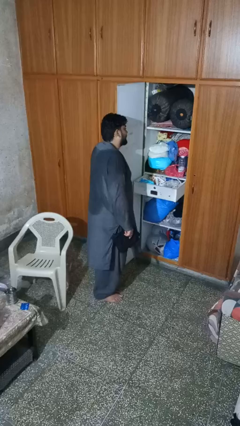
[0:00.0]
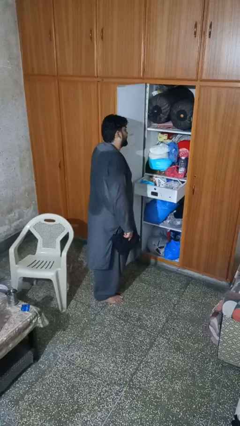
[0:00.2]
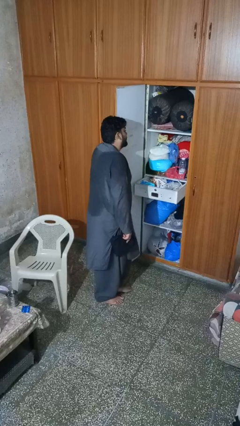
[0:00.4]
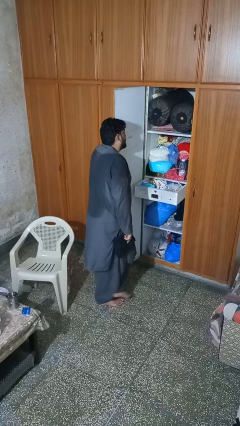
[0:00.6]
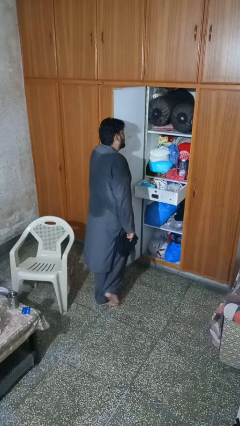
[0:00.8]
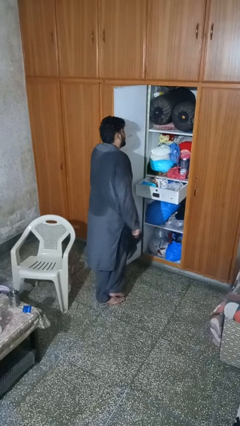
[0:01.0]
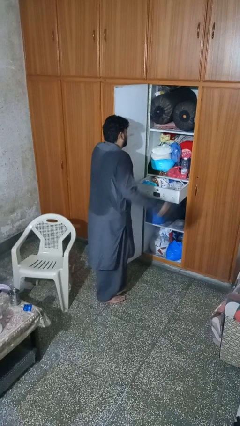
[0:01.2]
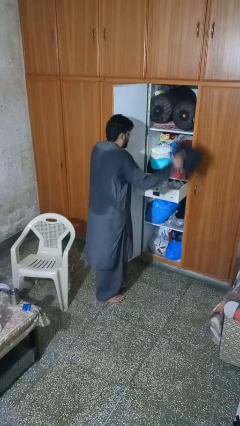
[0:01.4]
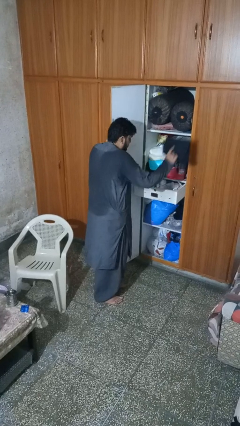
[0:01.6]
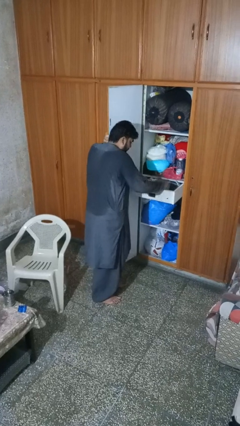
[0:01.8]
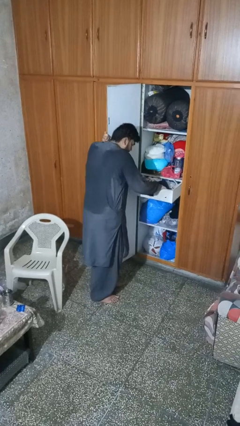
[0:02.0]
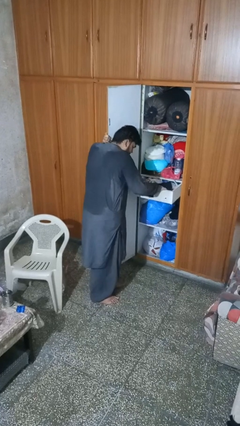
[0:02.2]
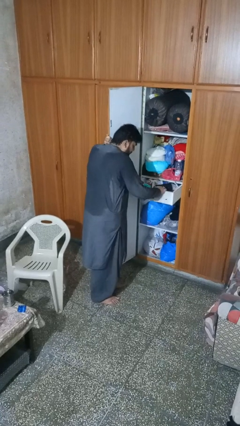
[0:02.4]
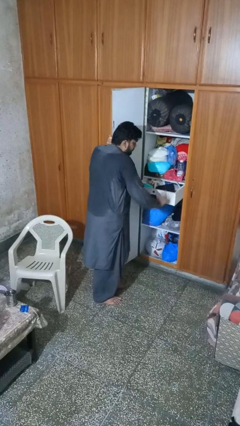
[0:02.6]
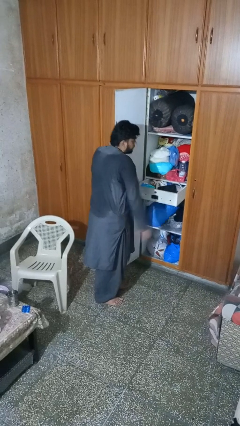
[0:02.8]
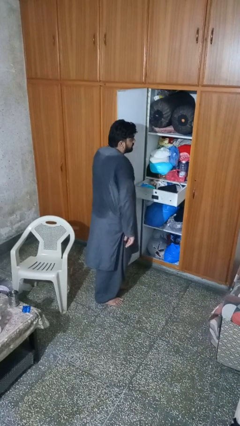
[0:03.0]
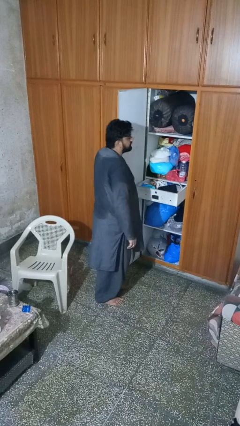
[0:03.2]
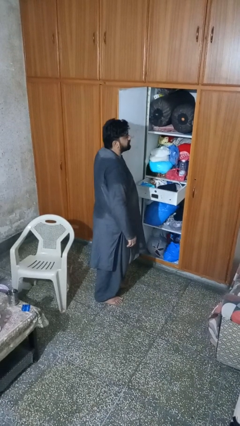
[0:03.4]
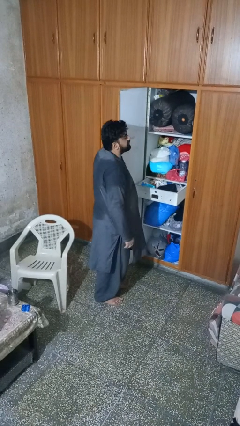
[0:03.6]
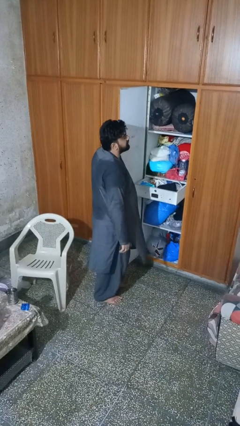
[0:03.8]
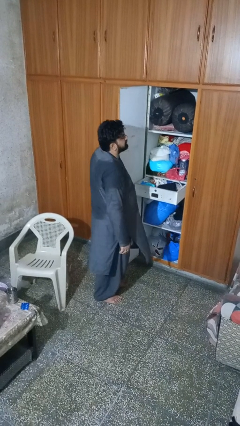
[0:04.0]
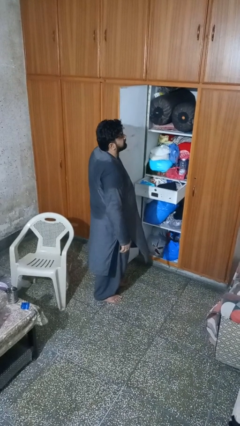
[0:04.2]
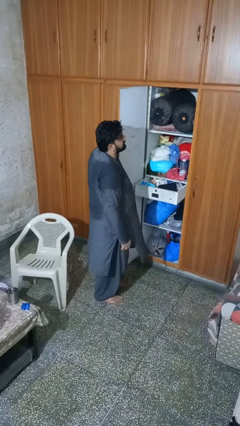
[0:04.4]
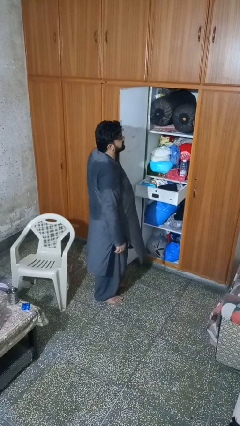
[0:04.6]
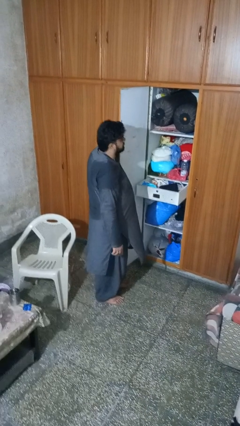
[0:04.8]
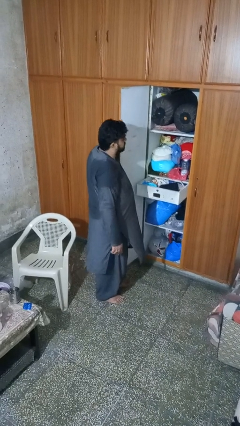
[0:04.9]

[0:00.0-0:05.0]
person puts clothes into dresser

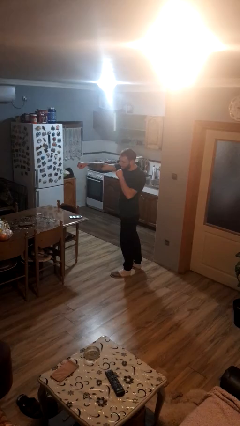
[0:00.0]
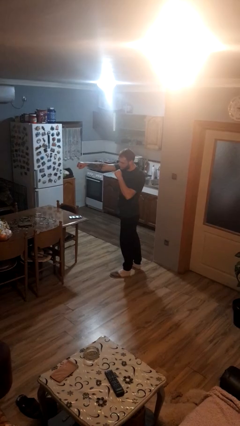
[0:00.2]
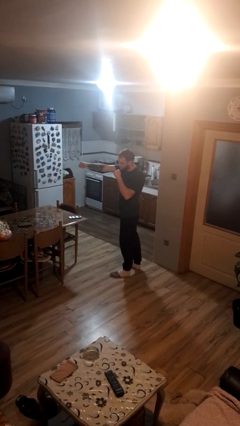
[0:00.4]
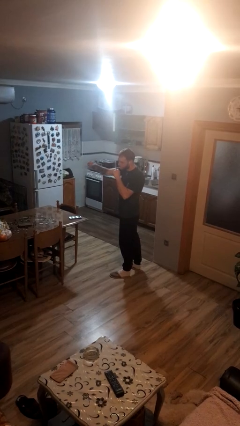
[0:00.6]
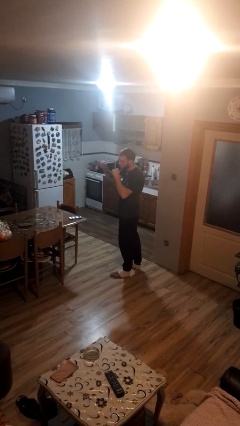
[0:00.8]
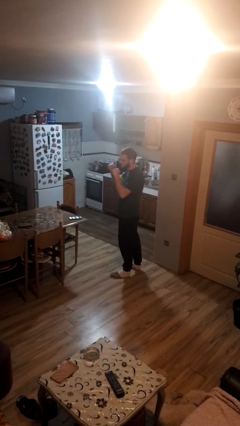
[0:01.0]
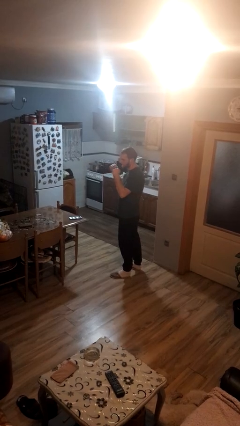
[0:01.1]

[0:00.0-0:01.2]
person punches

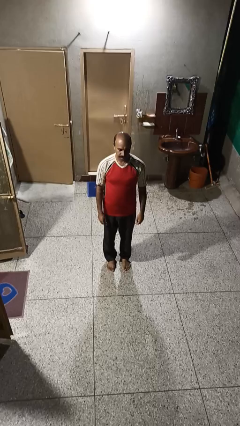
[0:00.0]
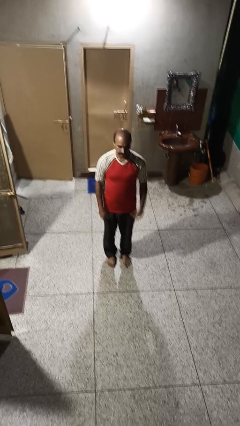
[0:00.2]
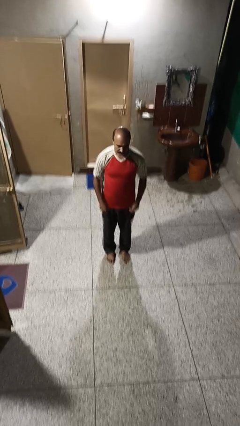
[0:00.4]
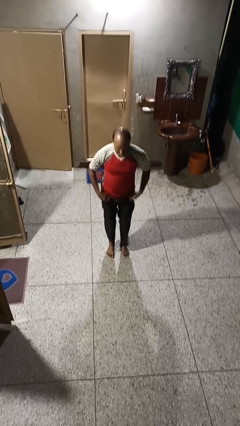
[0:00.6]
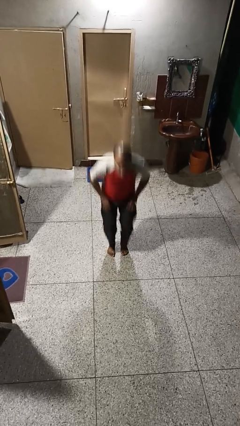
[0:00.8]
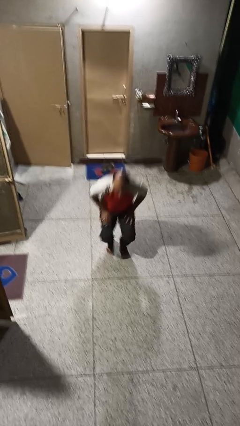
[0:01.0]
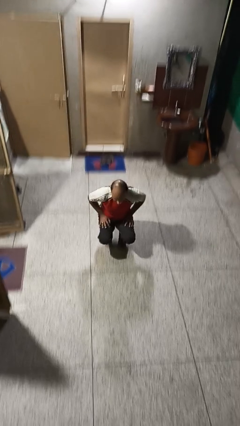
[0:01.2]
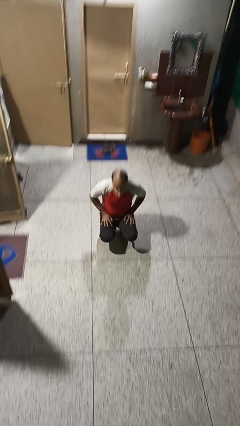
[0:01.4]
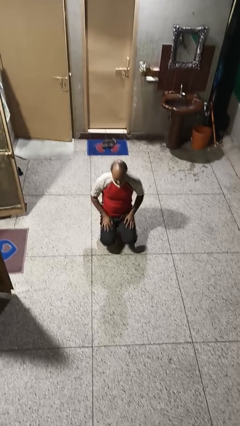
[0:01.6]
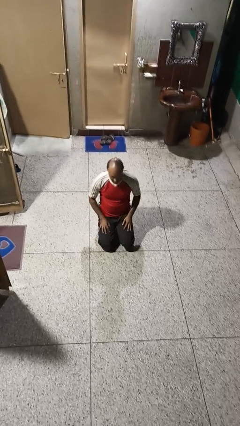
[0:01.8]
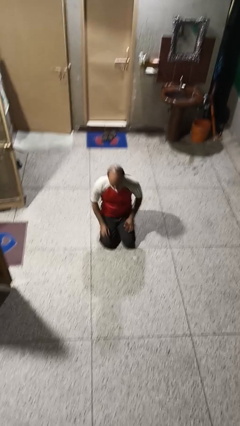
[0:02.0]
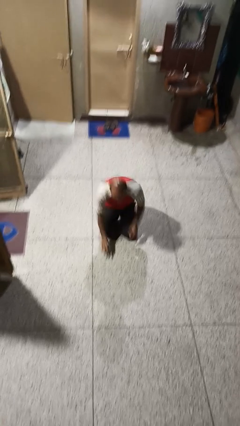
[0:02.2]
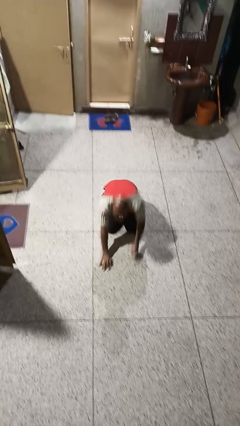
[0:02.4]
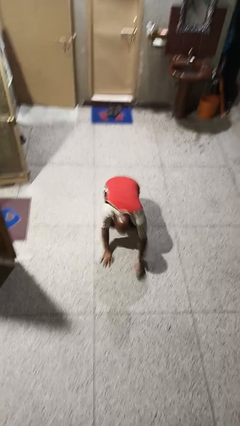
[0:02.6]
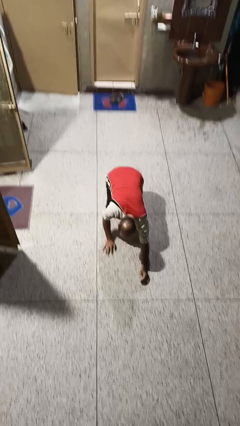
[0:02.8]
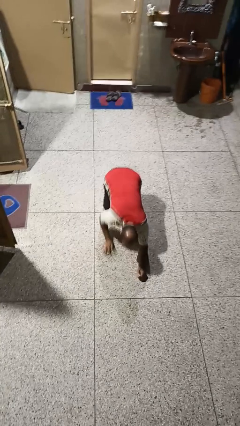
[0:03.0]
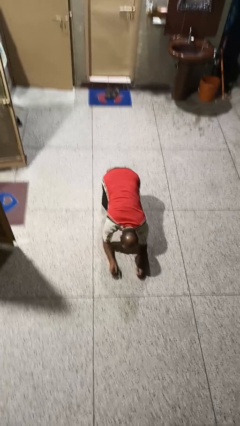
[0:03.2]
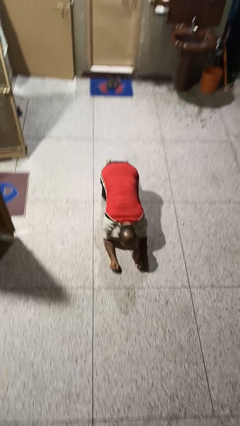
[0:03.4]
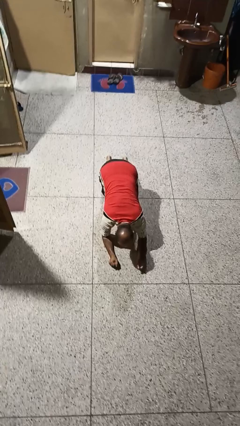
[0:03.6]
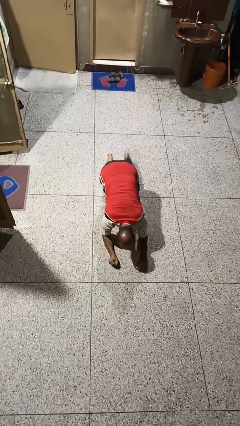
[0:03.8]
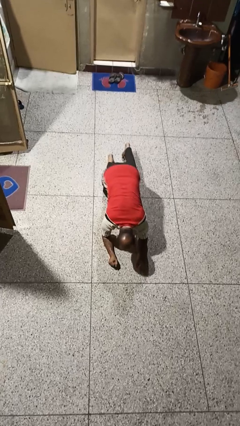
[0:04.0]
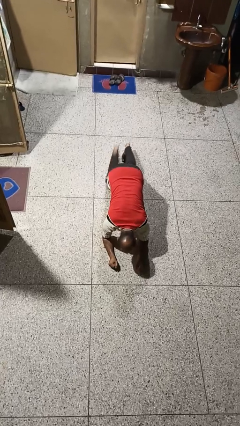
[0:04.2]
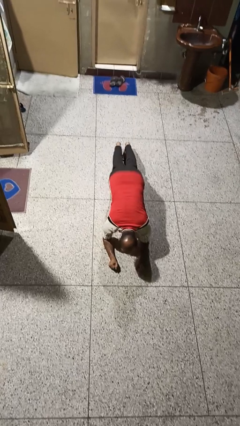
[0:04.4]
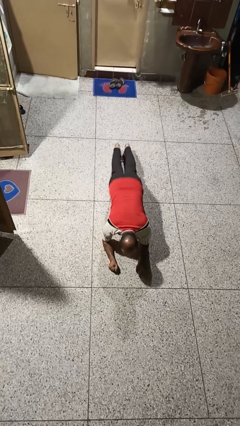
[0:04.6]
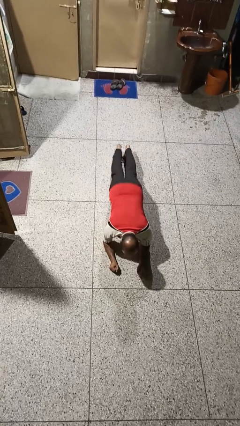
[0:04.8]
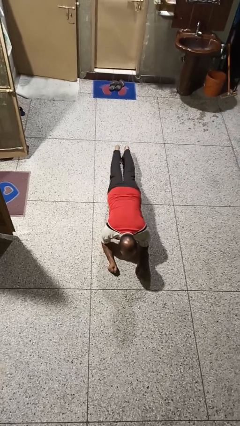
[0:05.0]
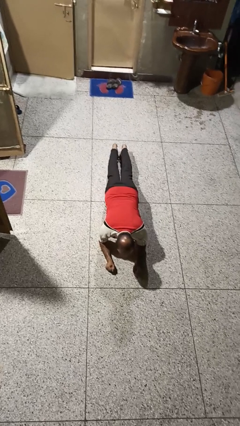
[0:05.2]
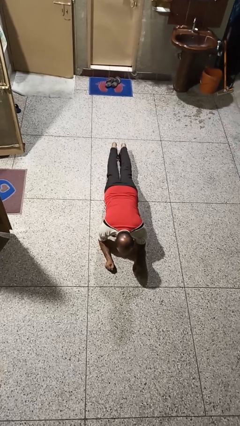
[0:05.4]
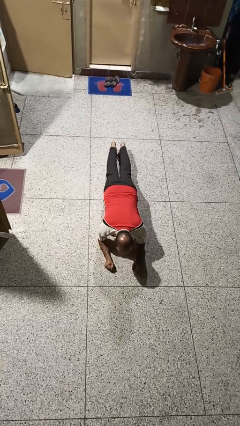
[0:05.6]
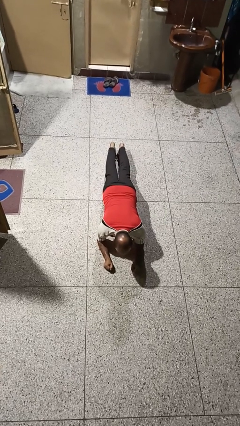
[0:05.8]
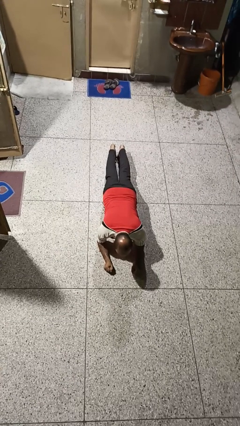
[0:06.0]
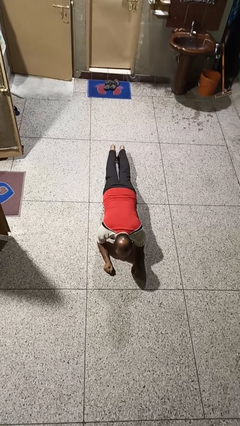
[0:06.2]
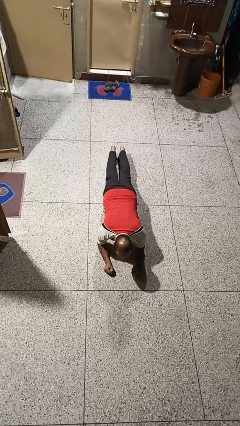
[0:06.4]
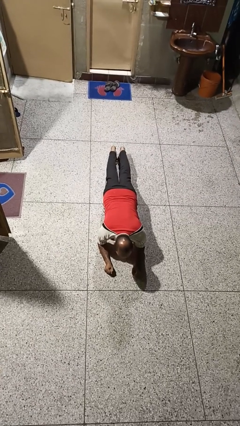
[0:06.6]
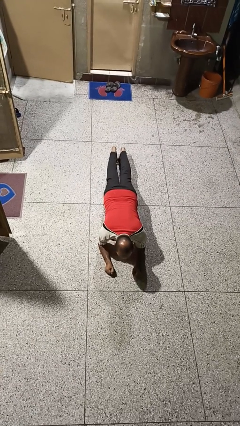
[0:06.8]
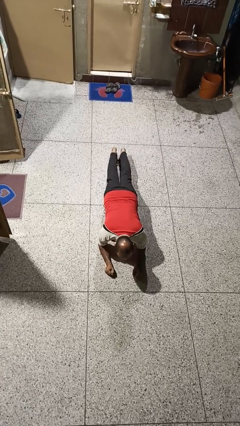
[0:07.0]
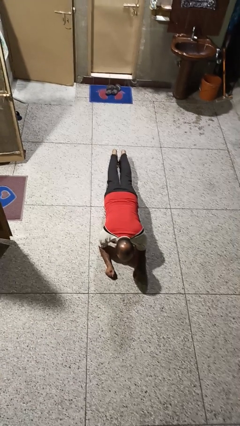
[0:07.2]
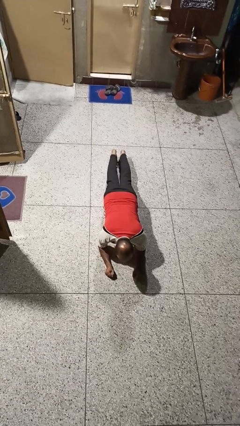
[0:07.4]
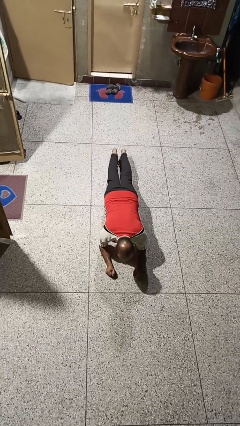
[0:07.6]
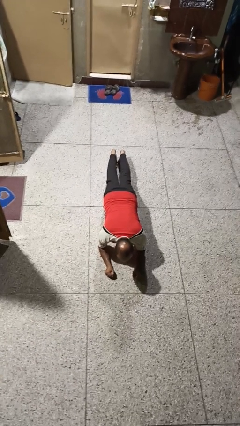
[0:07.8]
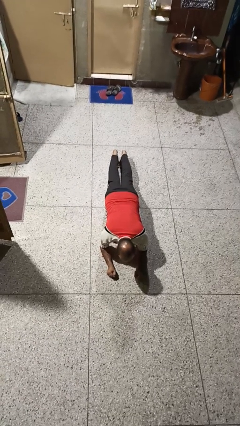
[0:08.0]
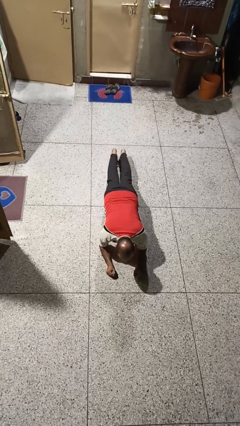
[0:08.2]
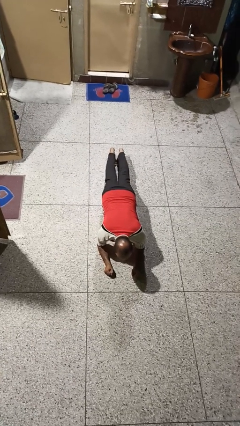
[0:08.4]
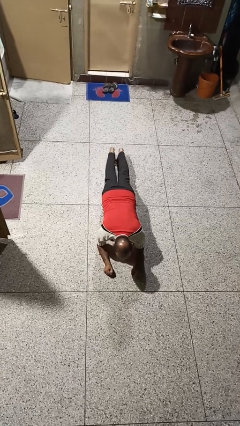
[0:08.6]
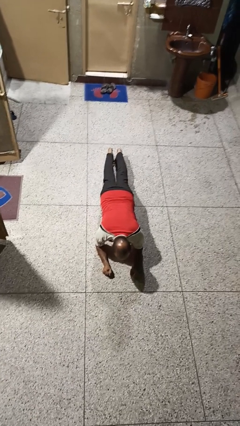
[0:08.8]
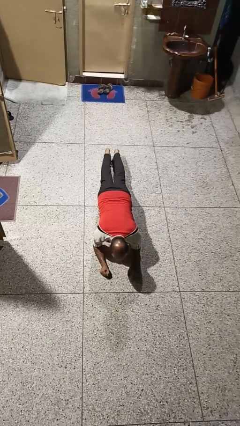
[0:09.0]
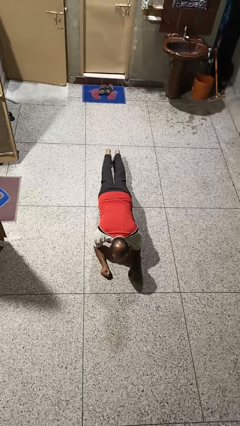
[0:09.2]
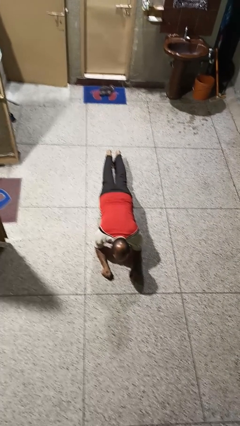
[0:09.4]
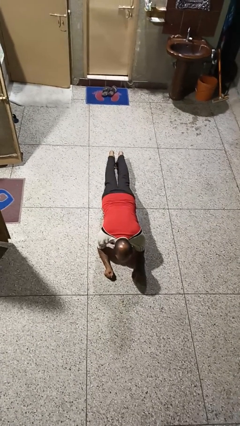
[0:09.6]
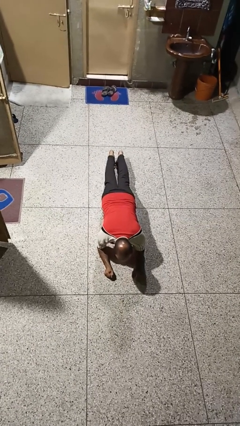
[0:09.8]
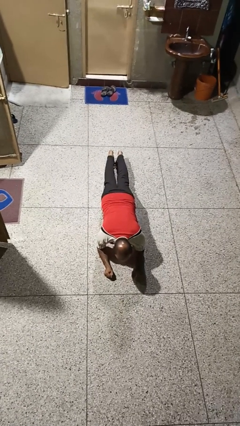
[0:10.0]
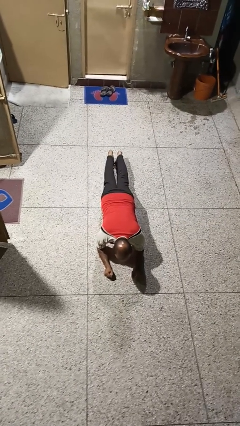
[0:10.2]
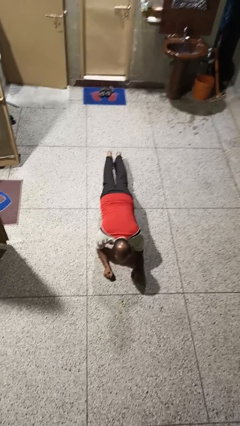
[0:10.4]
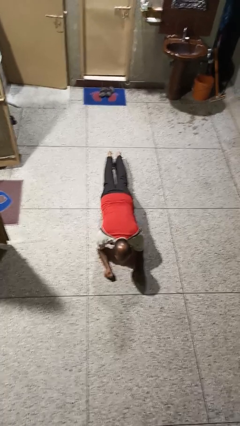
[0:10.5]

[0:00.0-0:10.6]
person exercises with plank

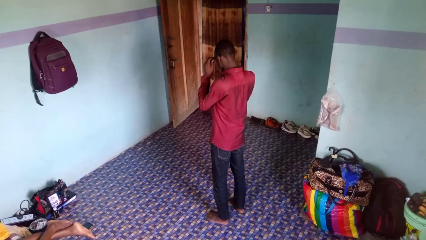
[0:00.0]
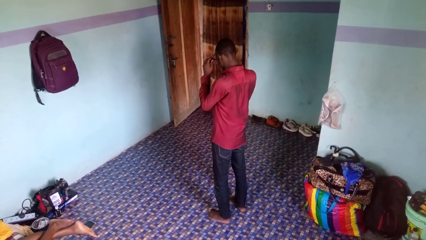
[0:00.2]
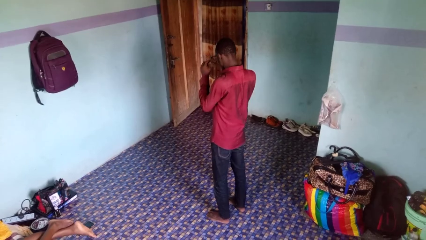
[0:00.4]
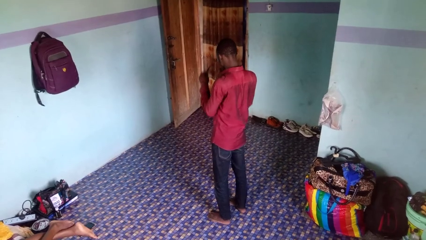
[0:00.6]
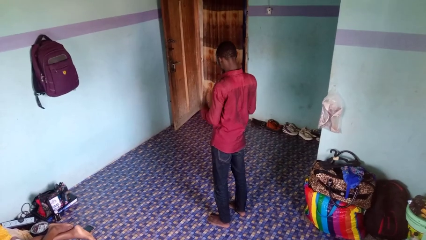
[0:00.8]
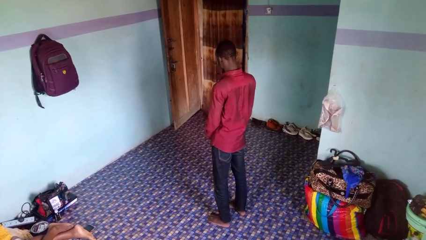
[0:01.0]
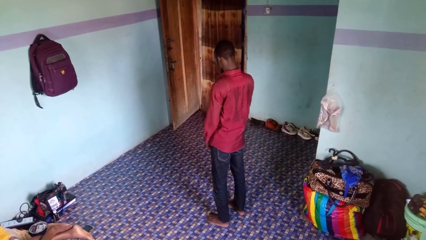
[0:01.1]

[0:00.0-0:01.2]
person takes off glasses
